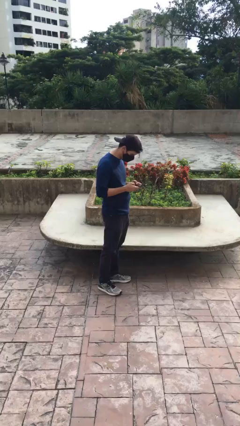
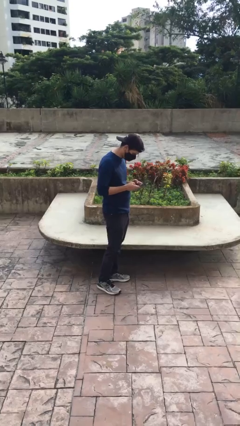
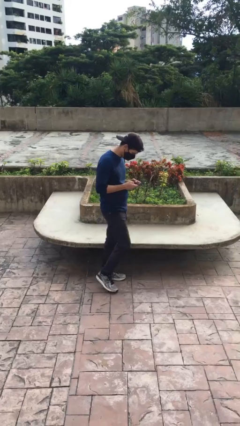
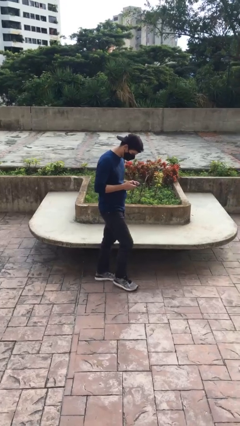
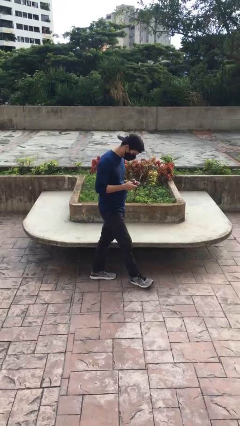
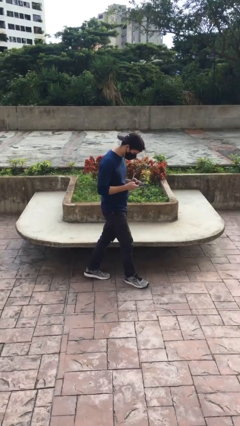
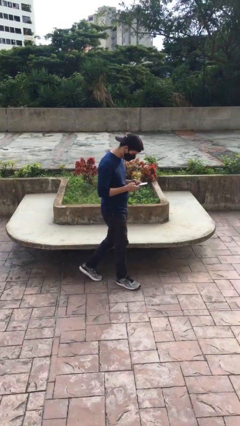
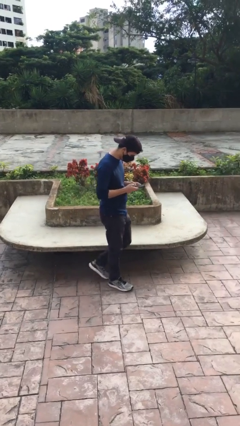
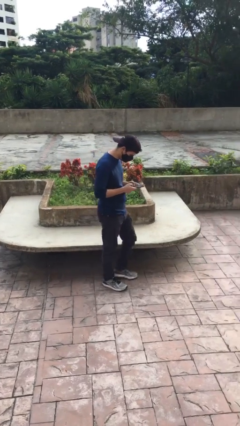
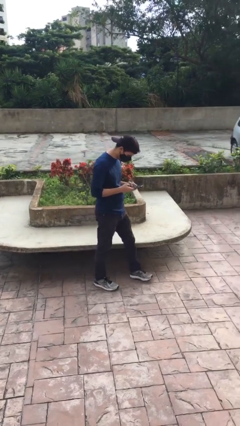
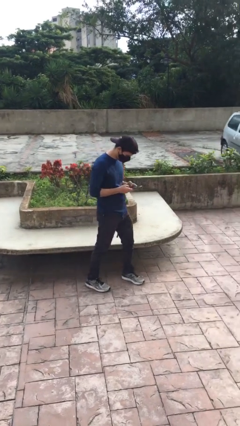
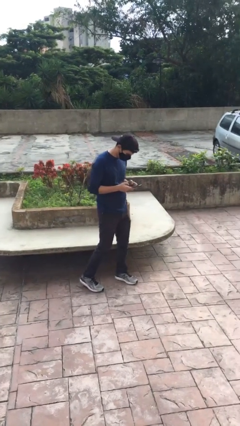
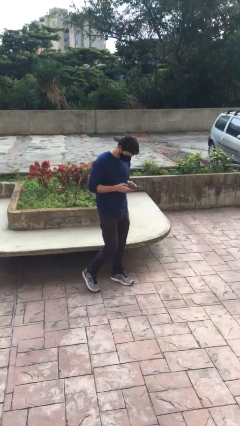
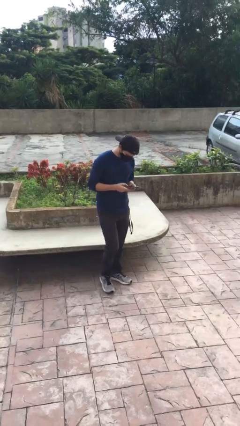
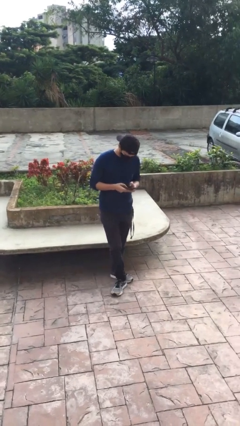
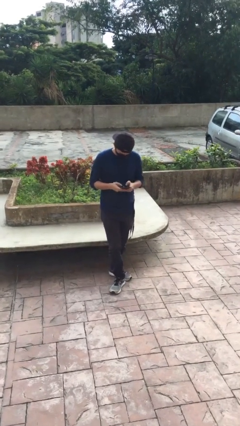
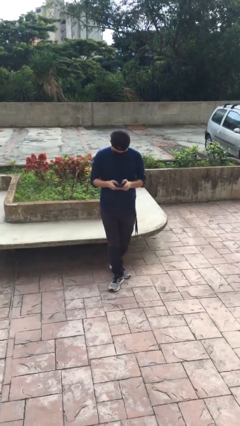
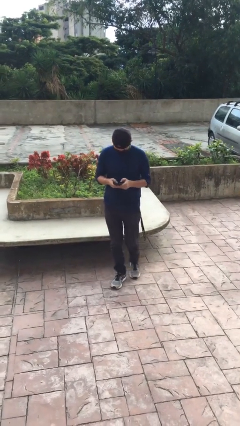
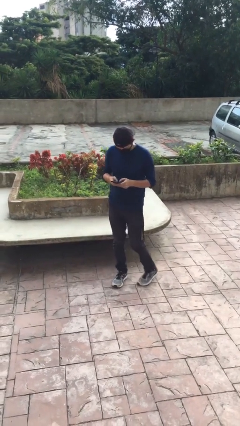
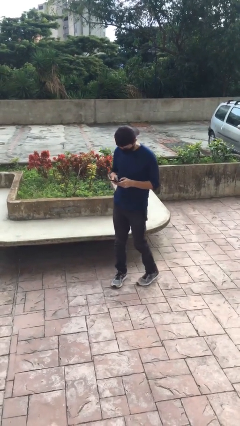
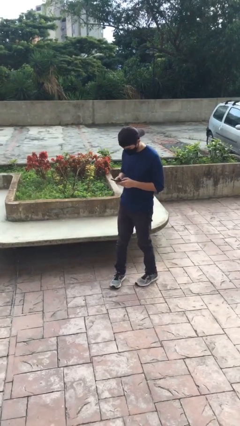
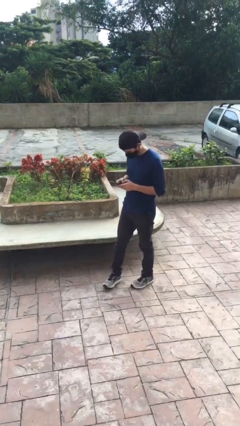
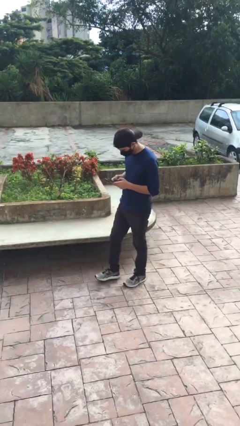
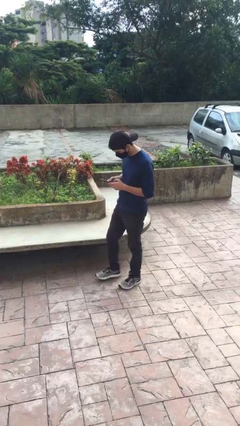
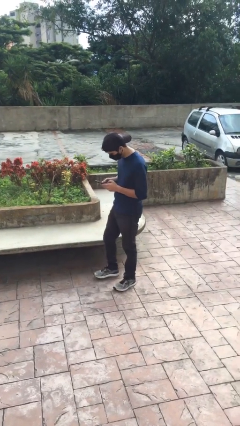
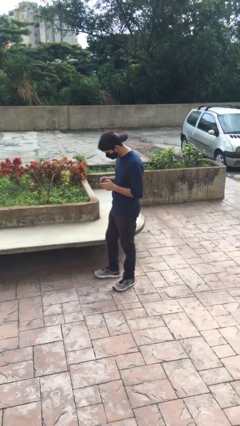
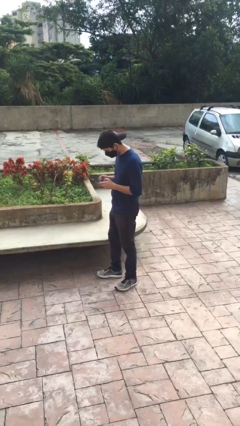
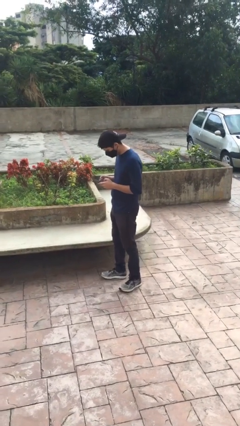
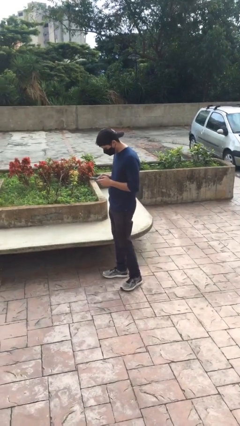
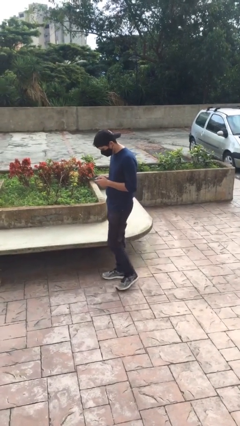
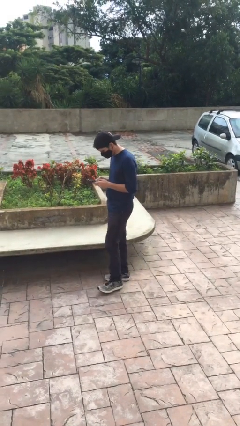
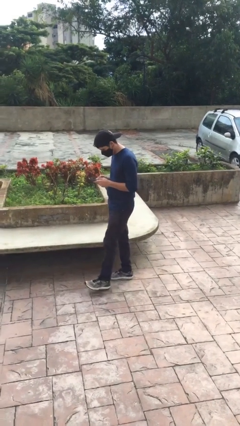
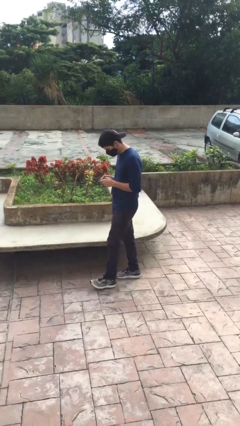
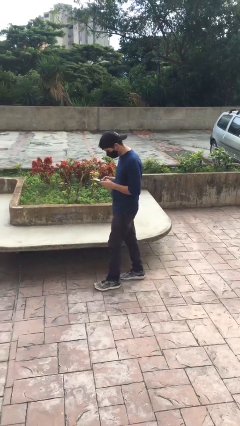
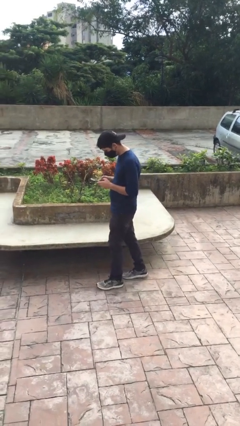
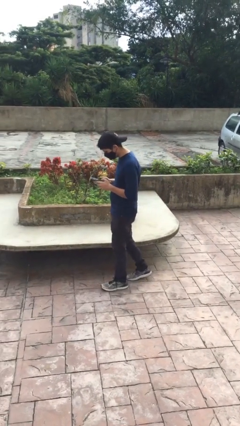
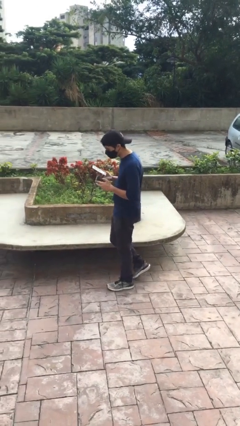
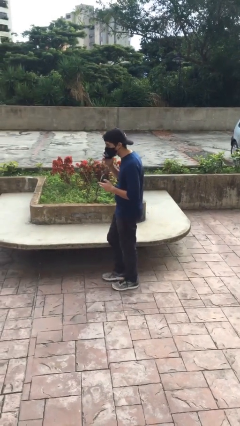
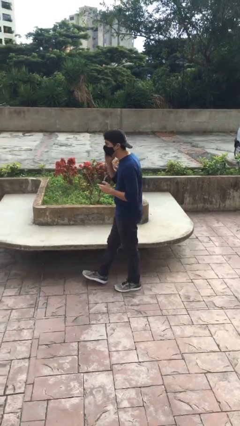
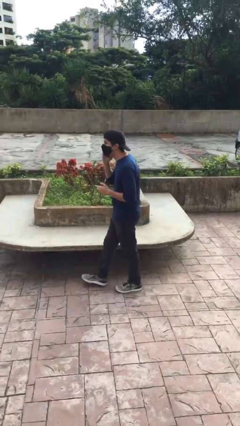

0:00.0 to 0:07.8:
person texts on phone

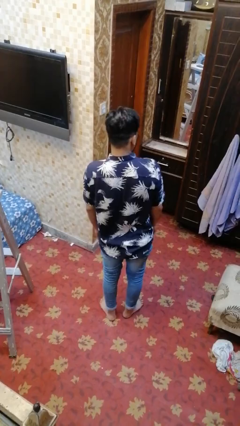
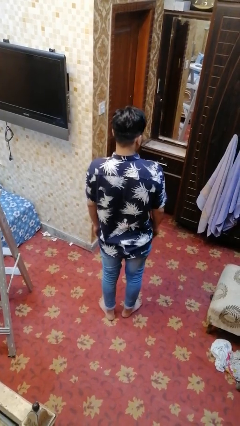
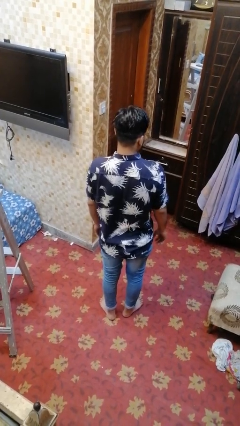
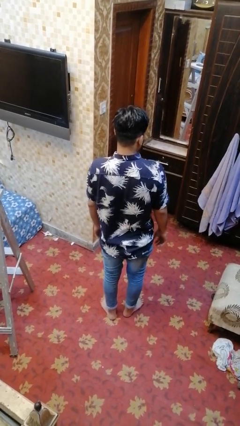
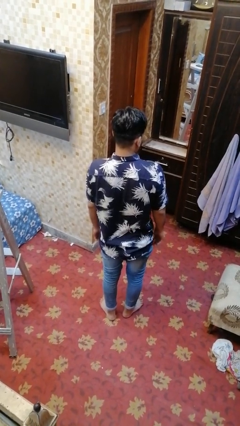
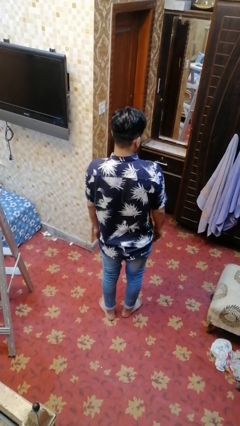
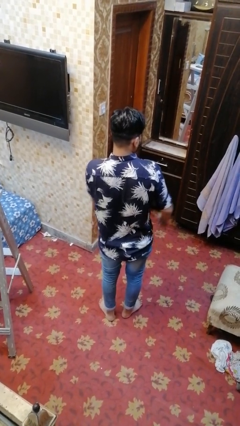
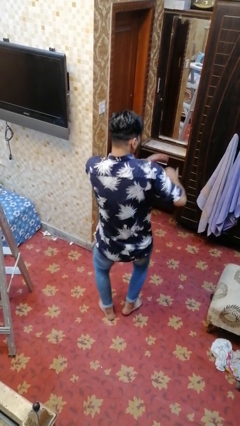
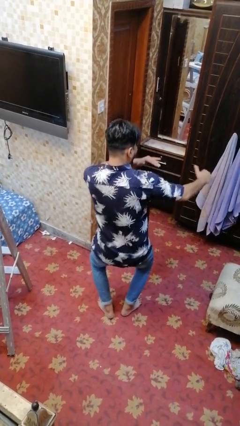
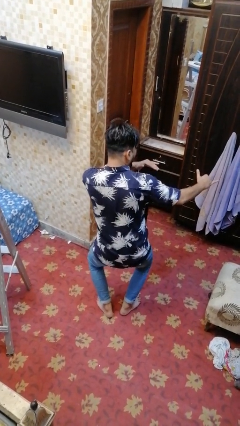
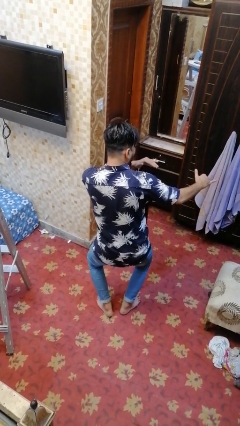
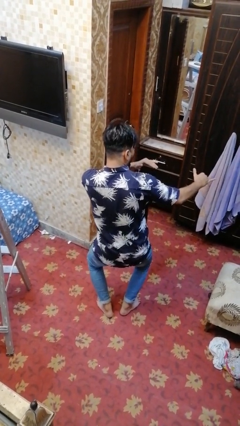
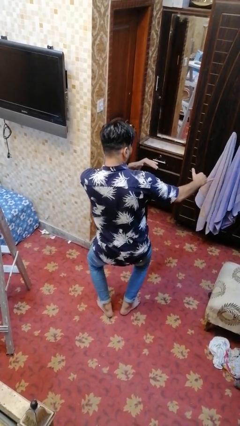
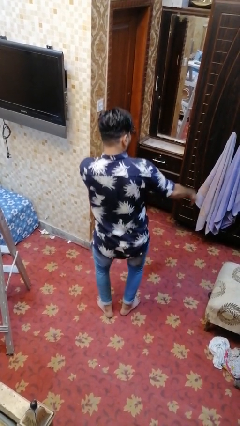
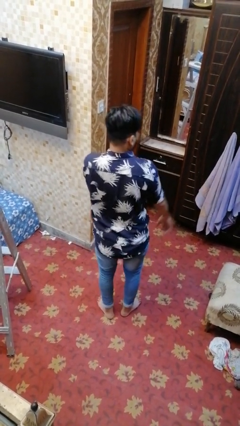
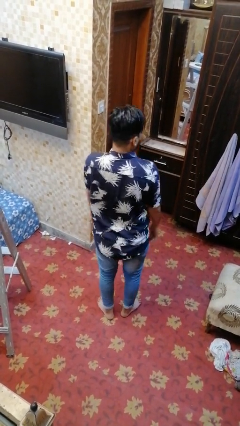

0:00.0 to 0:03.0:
person karate chop

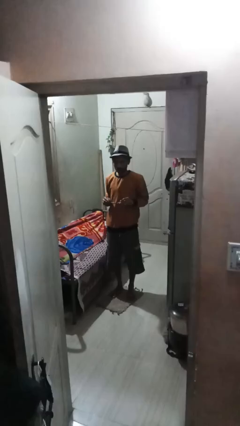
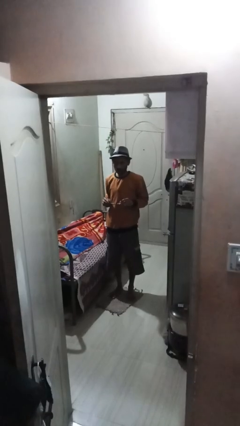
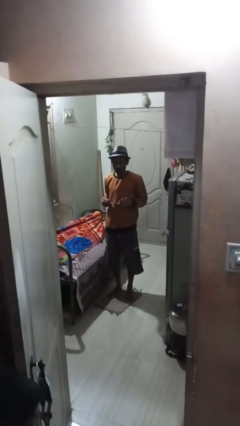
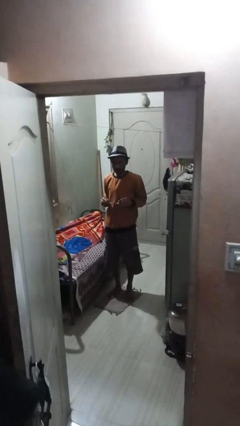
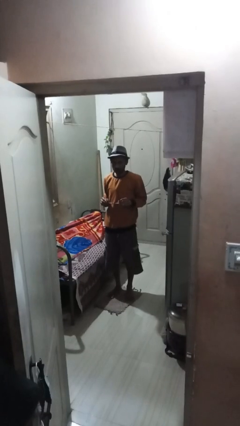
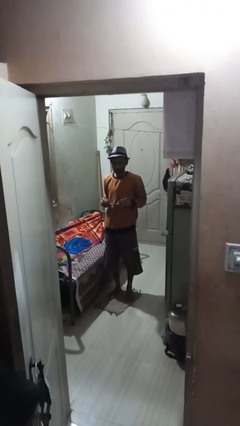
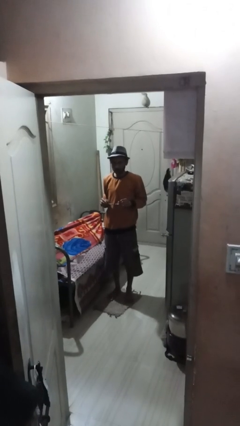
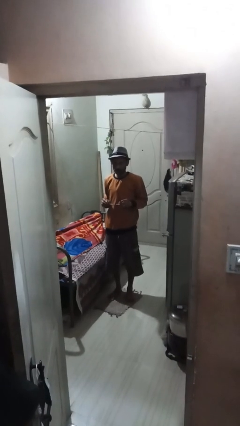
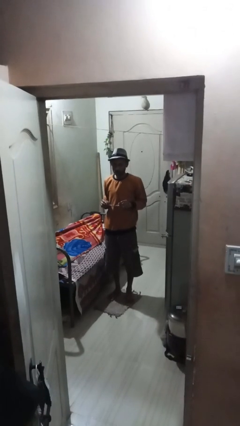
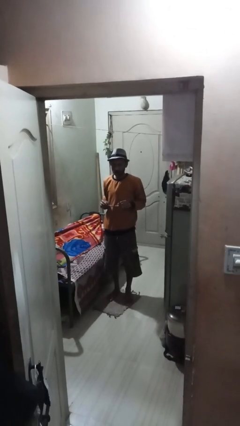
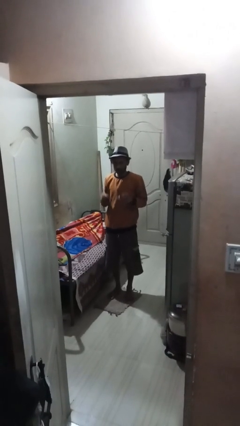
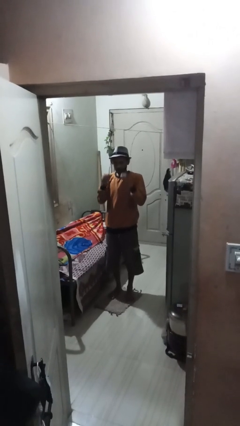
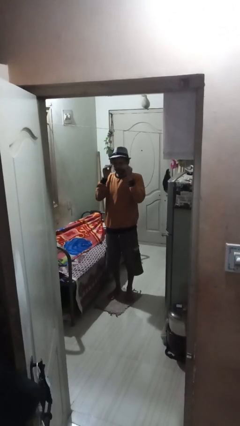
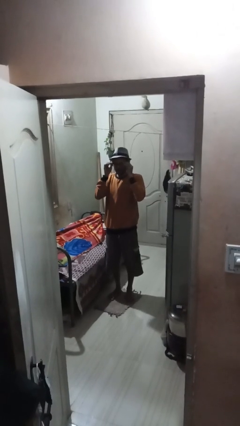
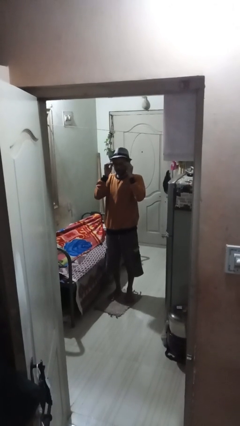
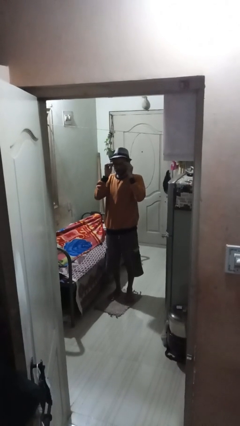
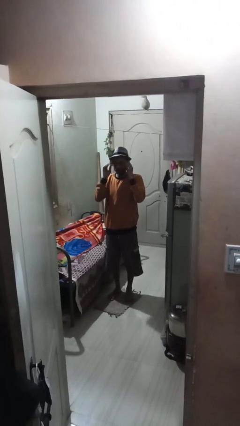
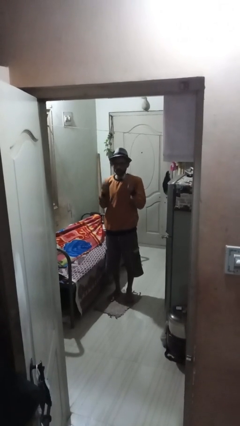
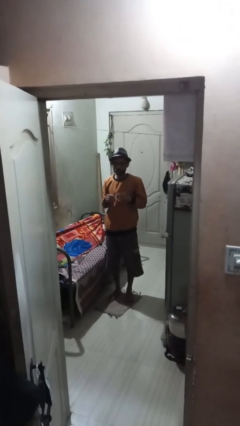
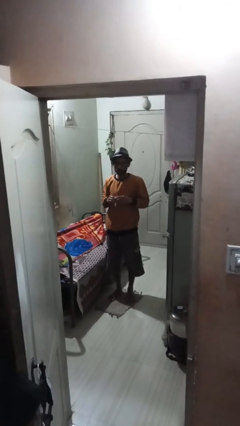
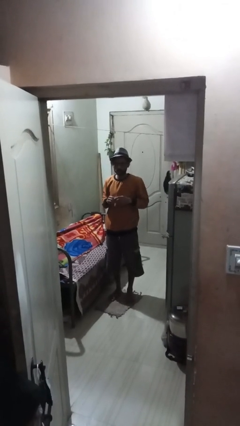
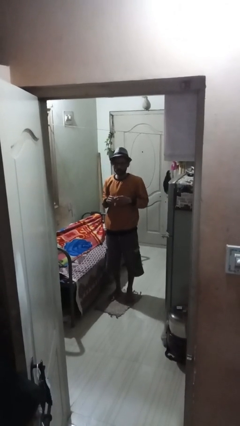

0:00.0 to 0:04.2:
person puts on glasses

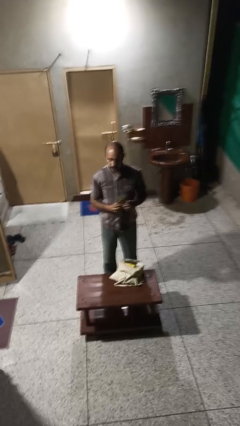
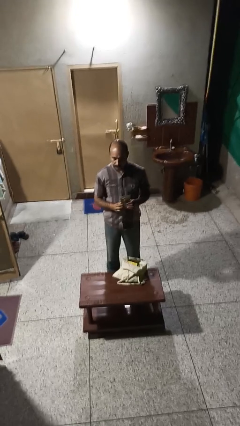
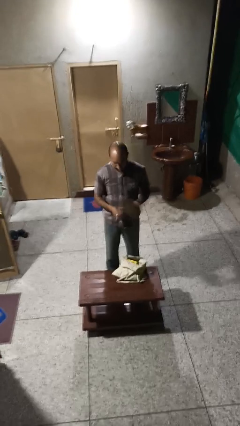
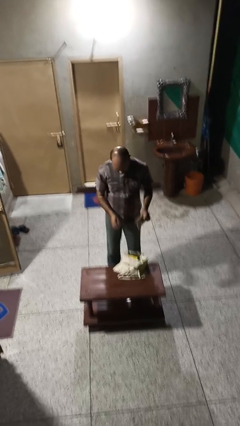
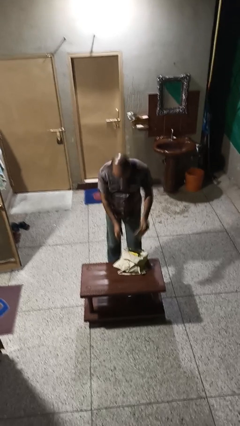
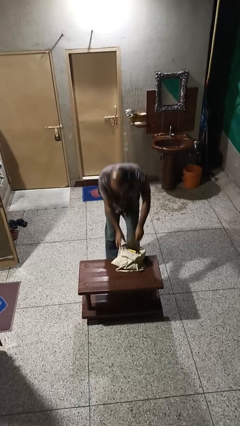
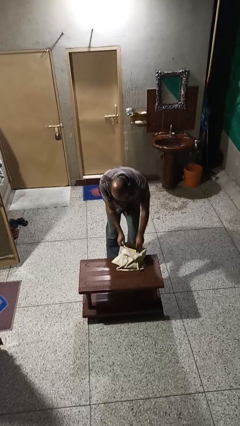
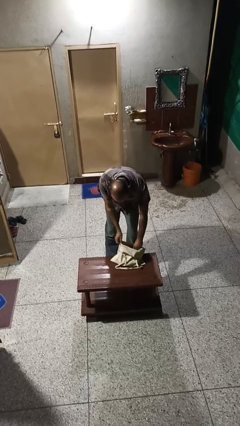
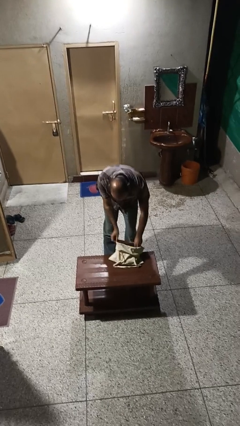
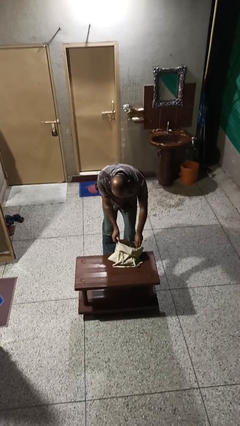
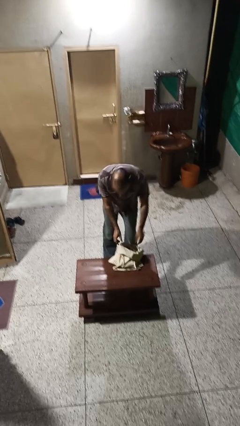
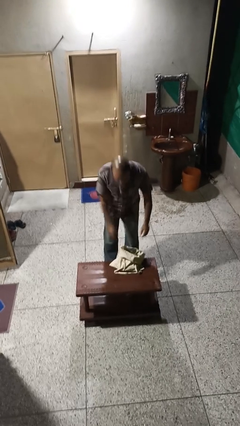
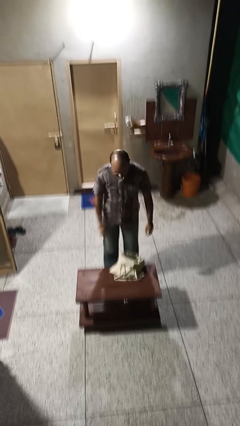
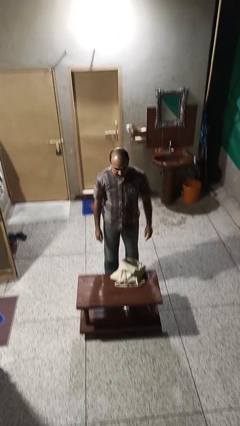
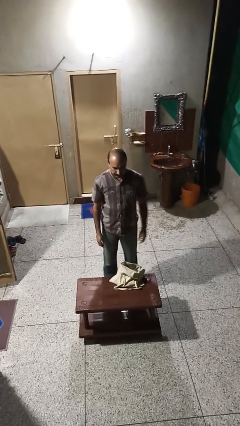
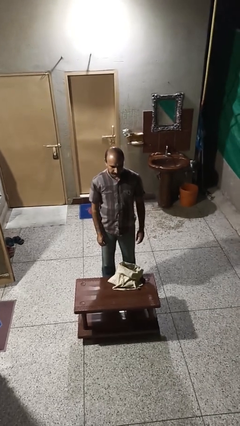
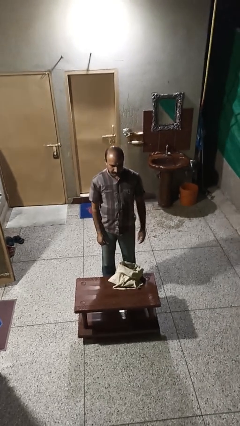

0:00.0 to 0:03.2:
person puts object into bag
